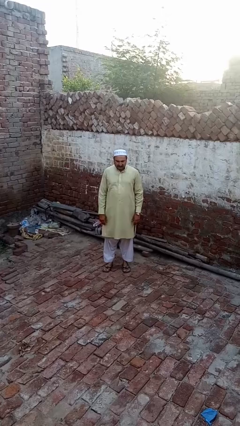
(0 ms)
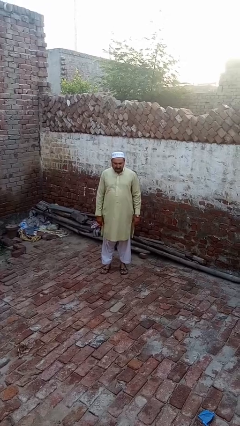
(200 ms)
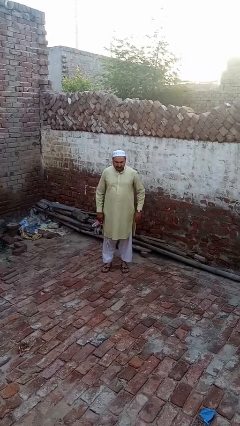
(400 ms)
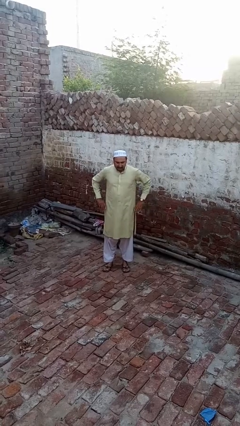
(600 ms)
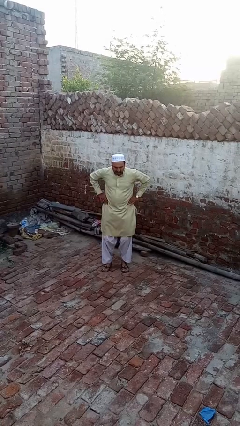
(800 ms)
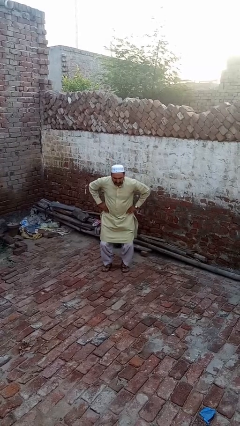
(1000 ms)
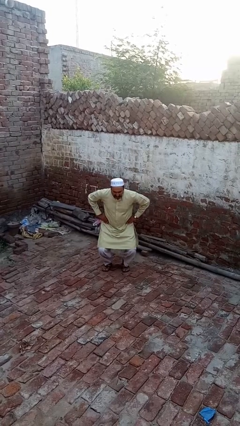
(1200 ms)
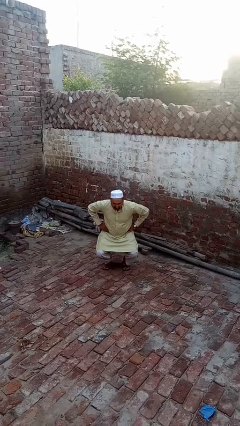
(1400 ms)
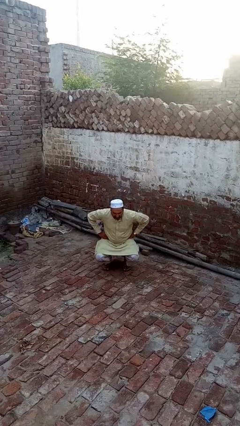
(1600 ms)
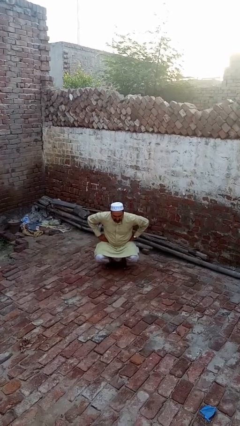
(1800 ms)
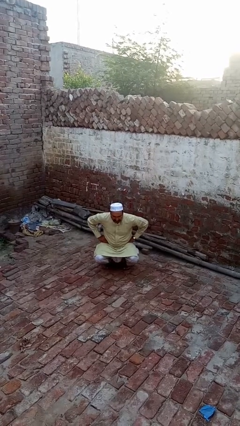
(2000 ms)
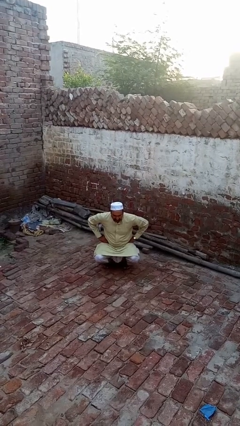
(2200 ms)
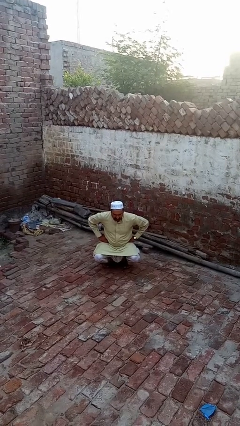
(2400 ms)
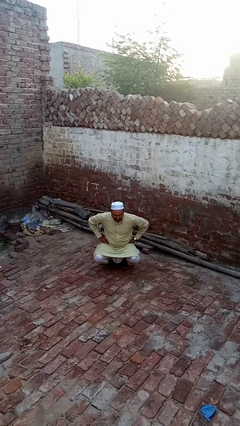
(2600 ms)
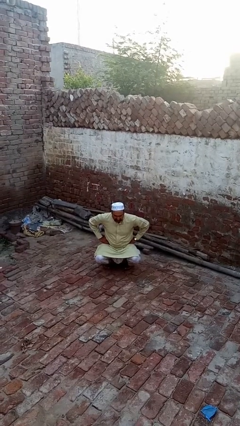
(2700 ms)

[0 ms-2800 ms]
person squats

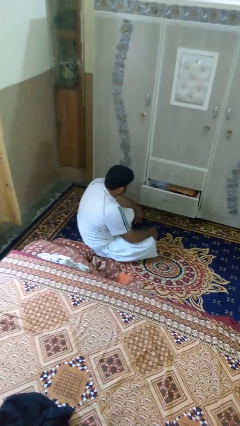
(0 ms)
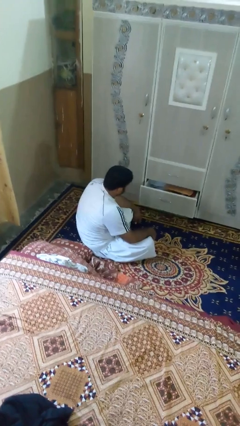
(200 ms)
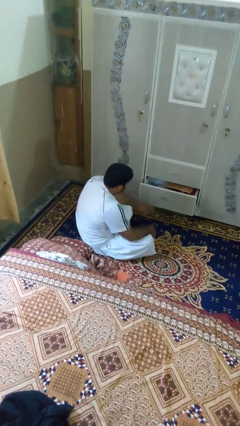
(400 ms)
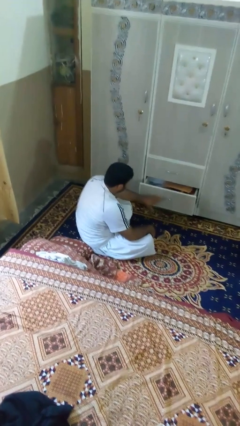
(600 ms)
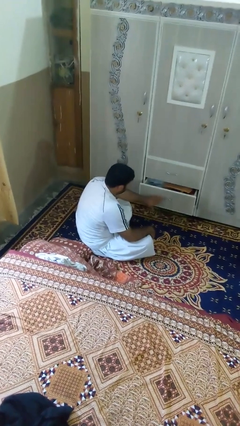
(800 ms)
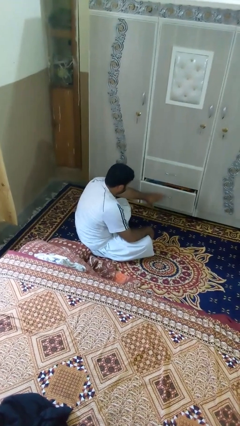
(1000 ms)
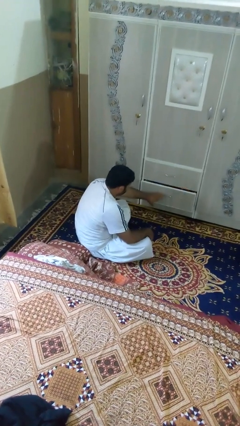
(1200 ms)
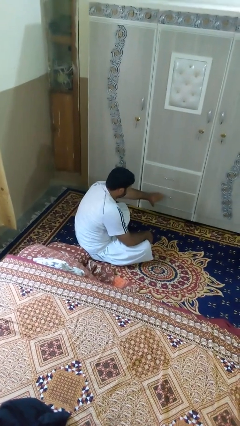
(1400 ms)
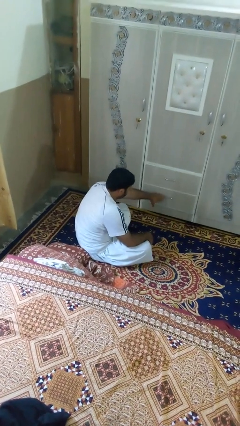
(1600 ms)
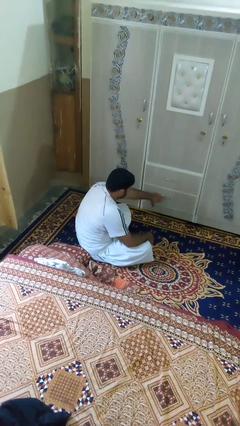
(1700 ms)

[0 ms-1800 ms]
person closes dresser drawer

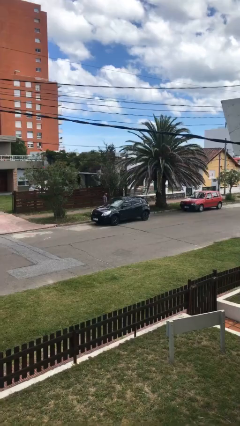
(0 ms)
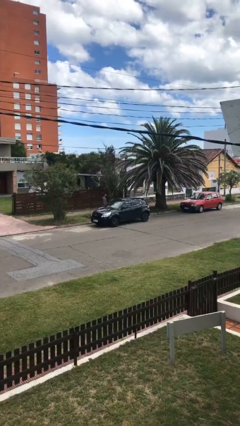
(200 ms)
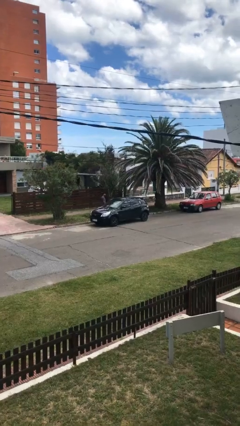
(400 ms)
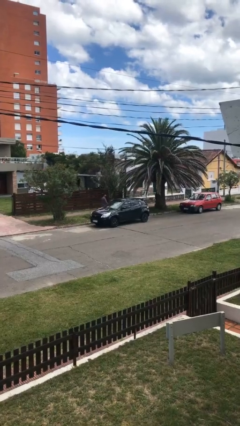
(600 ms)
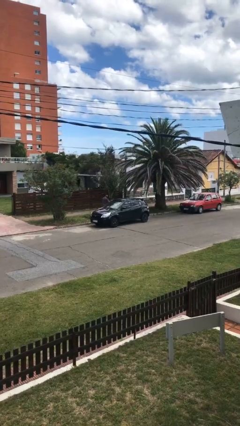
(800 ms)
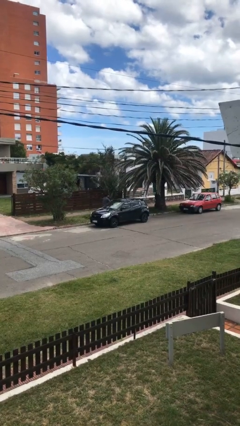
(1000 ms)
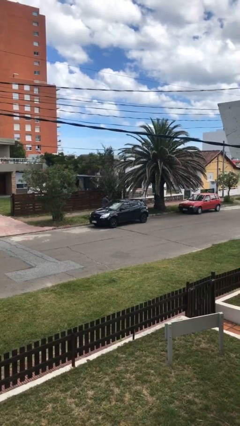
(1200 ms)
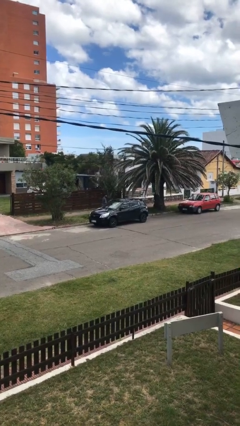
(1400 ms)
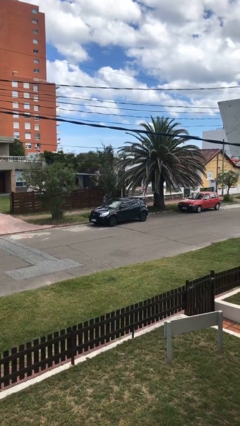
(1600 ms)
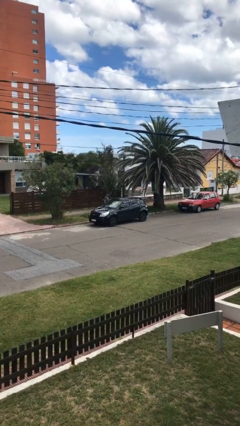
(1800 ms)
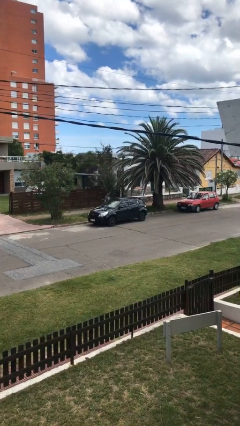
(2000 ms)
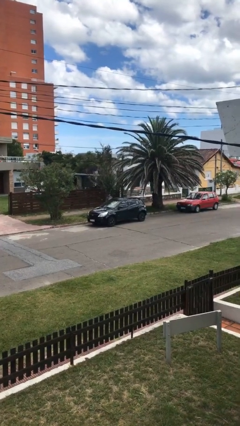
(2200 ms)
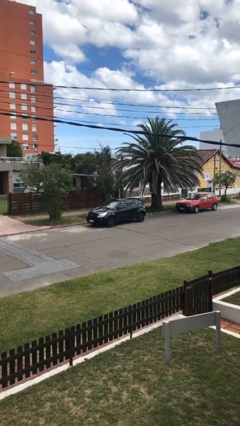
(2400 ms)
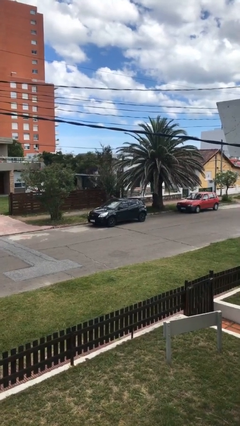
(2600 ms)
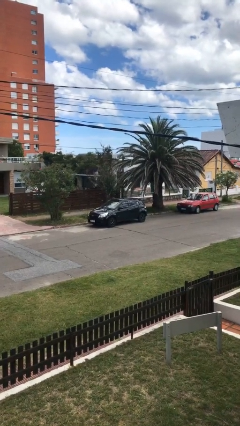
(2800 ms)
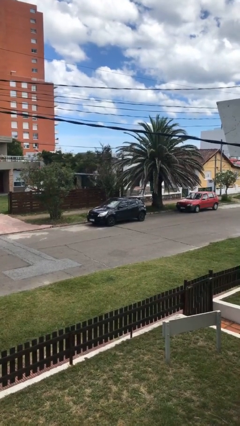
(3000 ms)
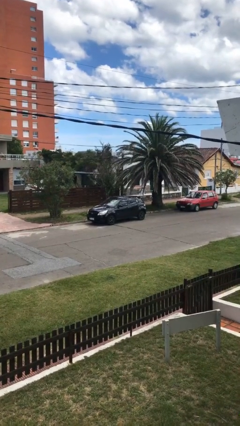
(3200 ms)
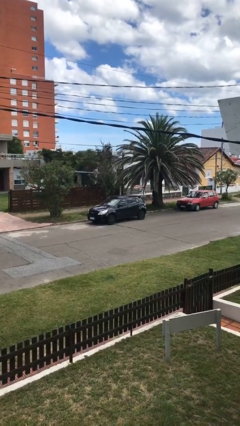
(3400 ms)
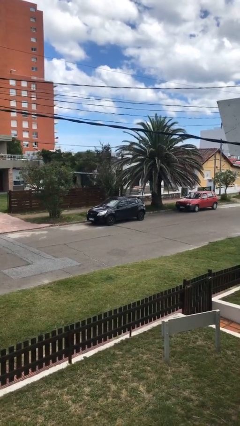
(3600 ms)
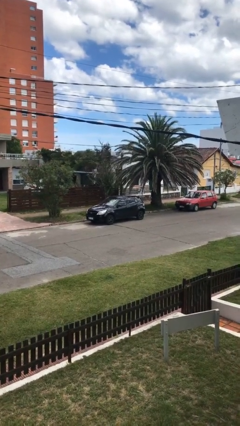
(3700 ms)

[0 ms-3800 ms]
car picks up person

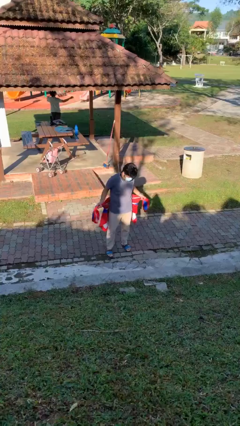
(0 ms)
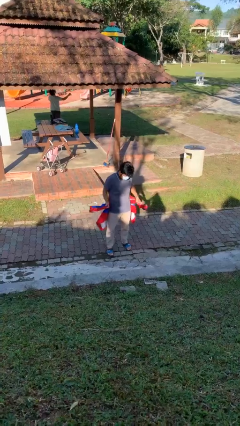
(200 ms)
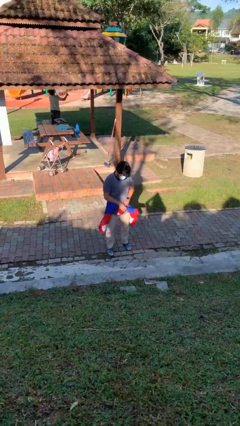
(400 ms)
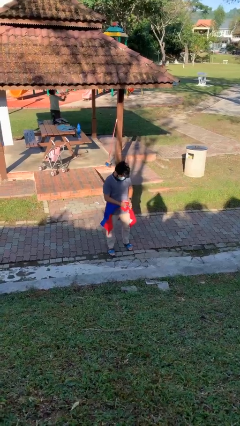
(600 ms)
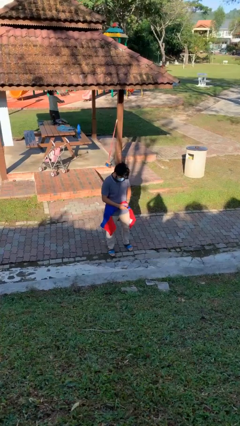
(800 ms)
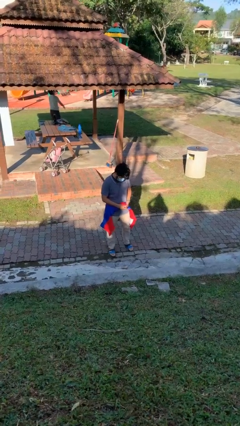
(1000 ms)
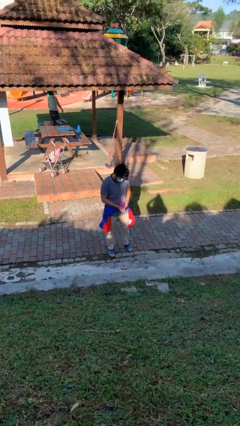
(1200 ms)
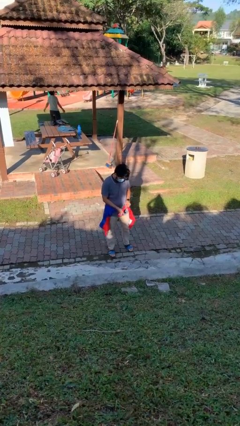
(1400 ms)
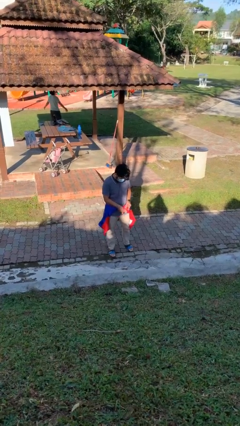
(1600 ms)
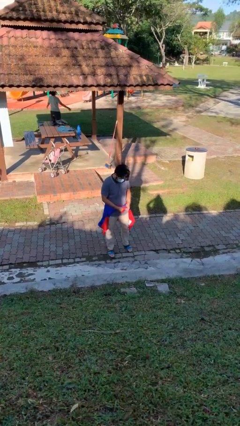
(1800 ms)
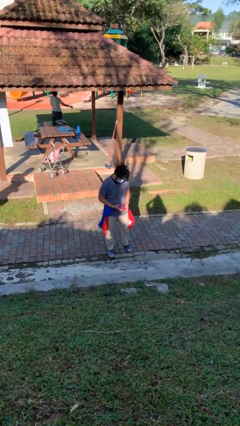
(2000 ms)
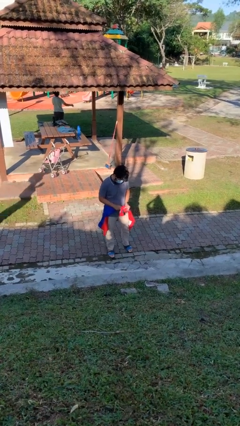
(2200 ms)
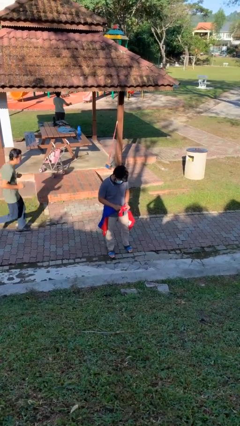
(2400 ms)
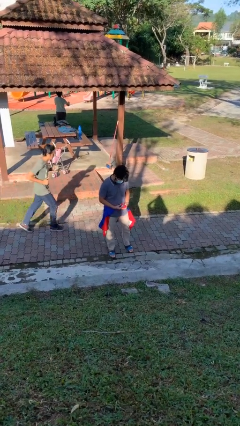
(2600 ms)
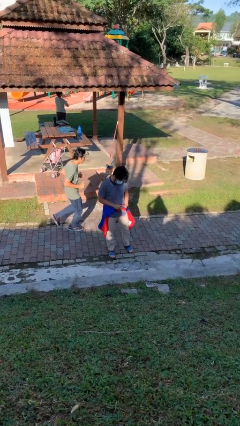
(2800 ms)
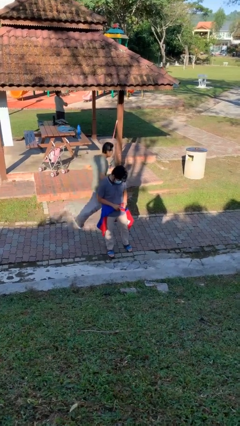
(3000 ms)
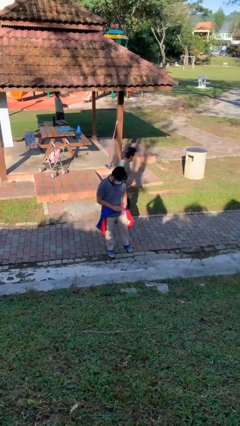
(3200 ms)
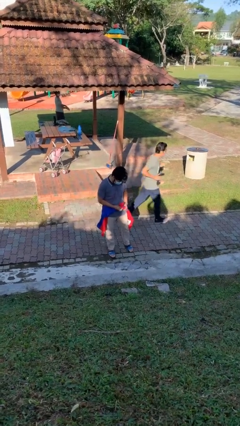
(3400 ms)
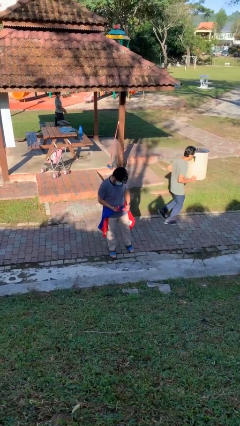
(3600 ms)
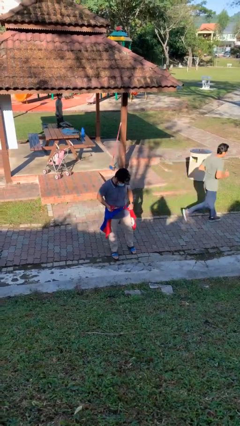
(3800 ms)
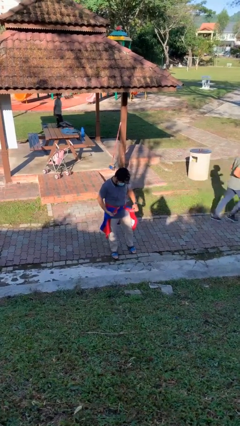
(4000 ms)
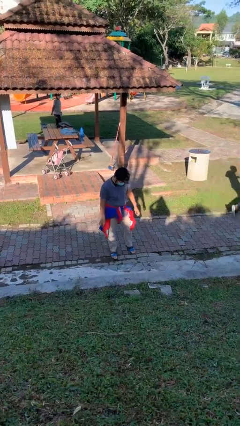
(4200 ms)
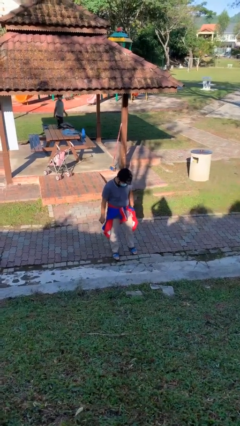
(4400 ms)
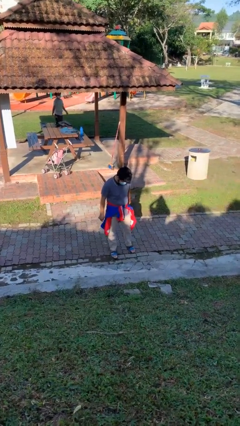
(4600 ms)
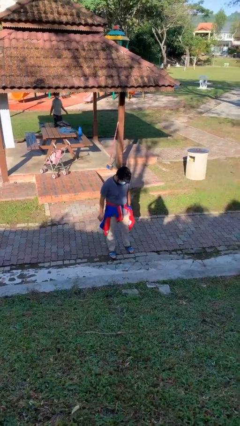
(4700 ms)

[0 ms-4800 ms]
person ties jacket around waist

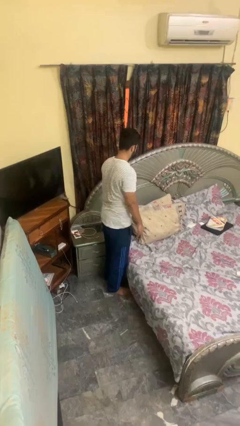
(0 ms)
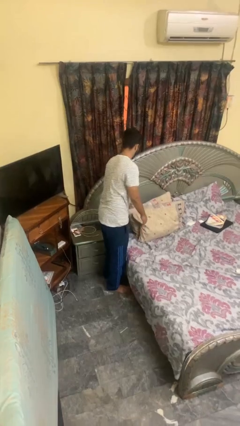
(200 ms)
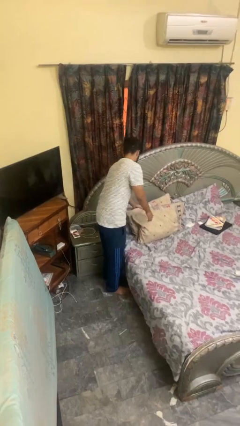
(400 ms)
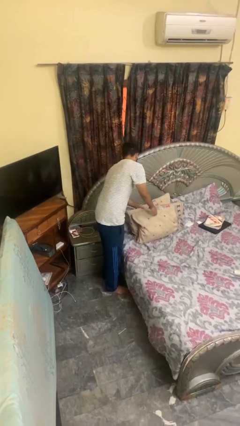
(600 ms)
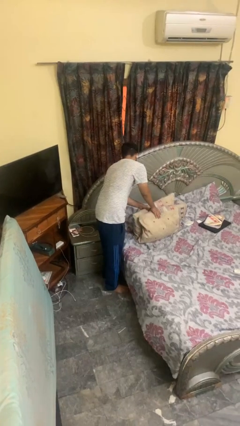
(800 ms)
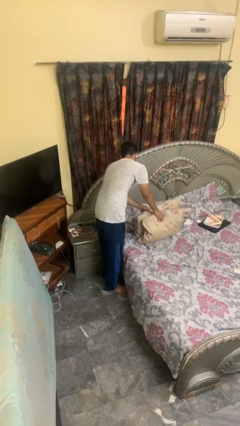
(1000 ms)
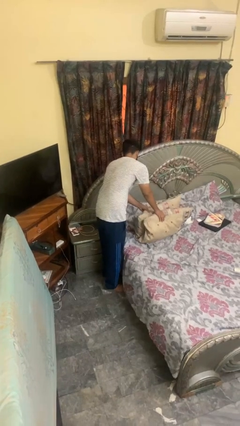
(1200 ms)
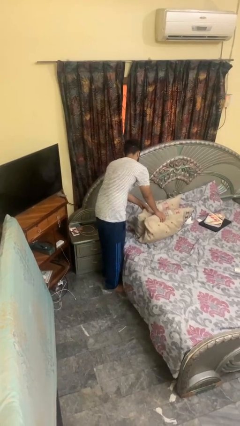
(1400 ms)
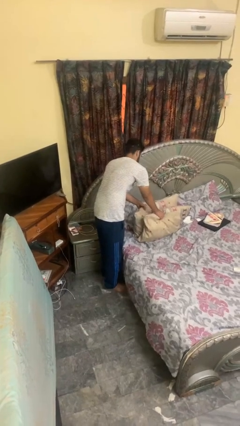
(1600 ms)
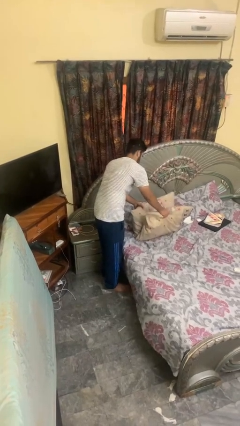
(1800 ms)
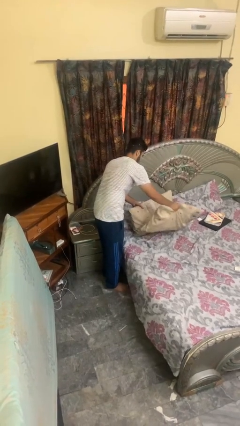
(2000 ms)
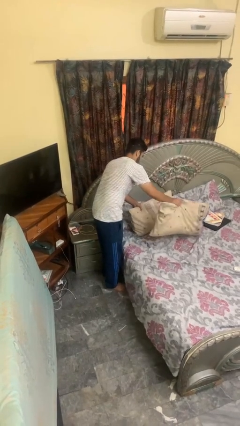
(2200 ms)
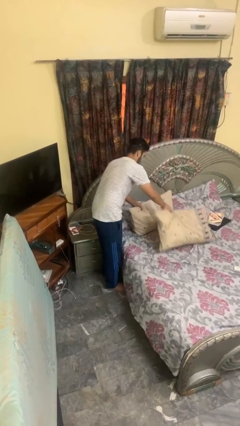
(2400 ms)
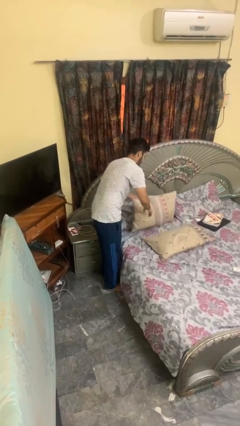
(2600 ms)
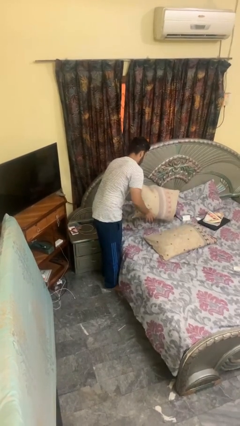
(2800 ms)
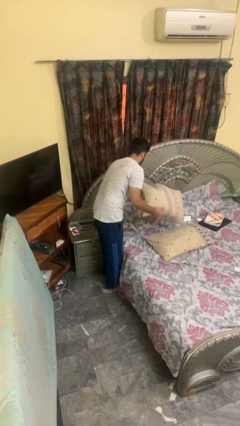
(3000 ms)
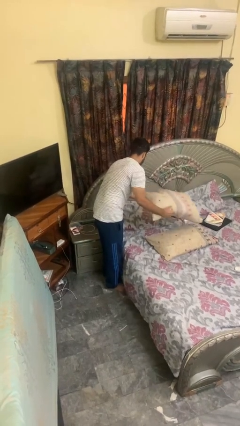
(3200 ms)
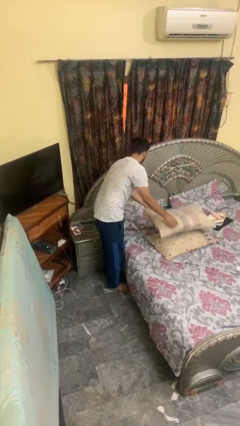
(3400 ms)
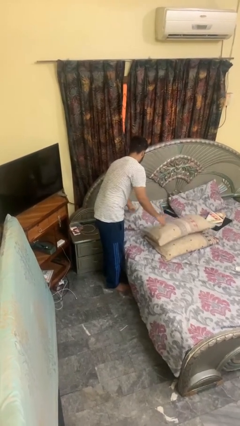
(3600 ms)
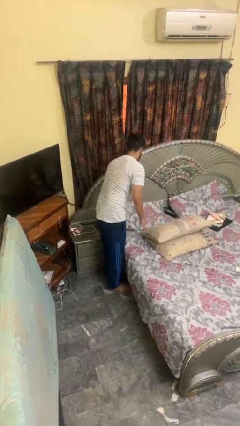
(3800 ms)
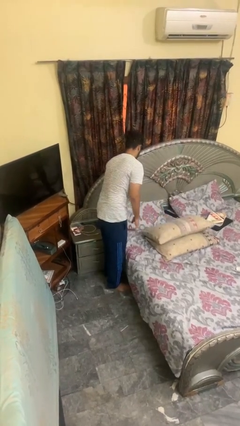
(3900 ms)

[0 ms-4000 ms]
person searches under bed

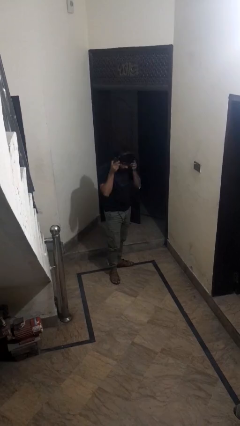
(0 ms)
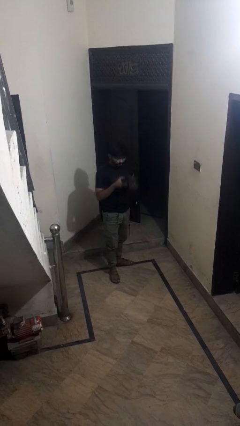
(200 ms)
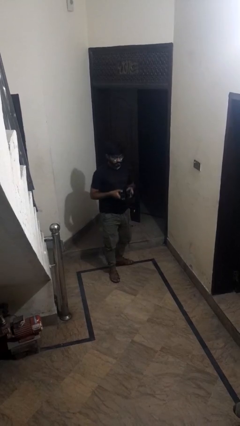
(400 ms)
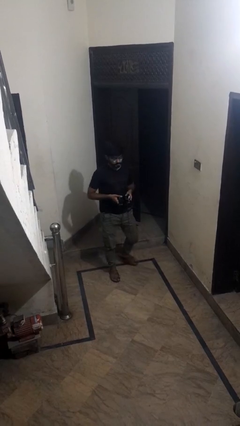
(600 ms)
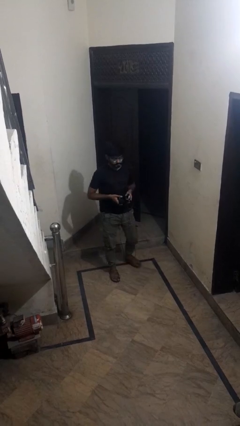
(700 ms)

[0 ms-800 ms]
person takes off headphones
